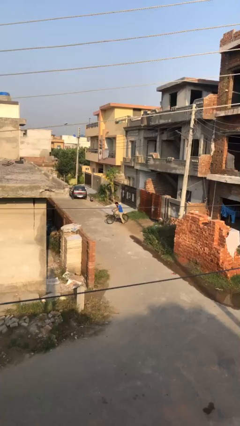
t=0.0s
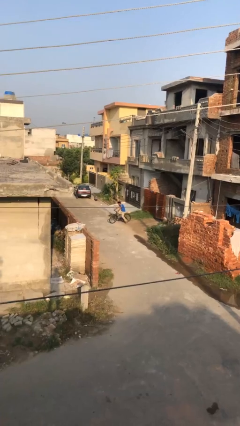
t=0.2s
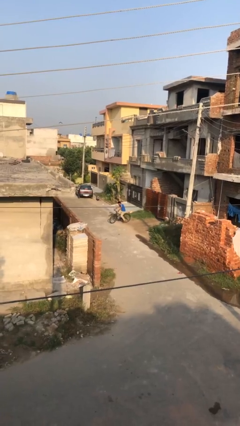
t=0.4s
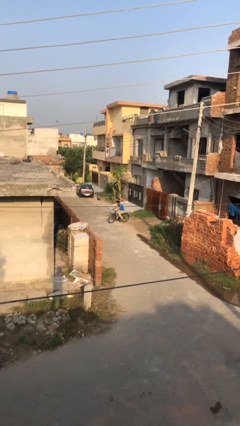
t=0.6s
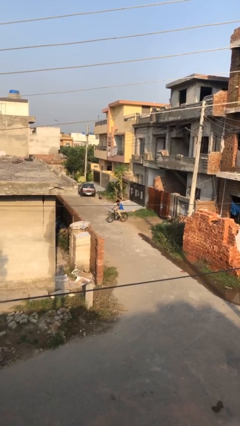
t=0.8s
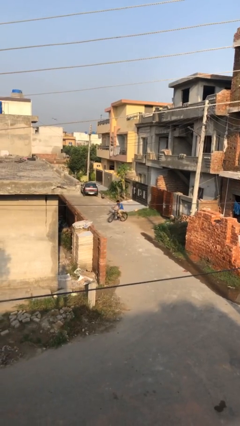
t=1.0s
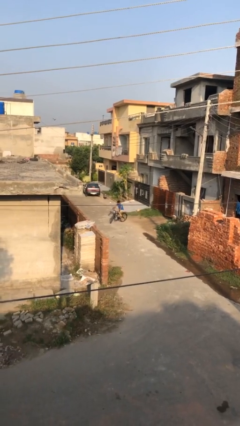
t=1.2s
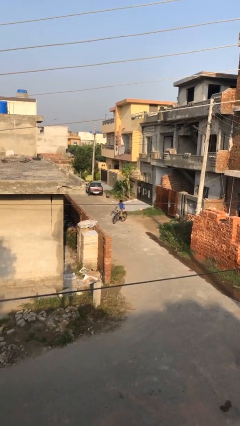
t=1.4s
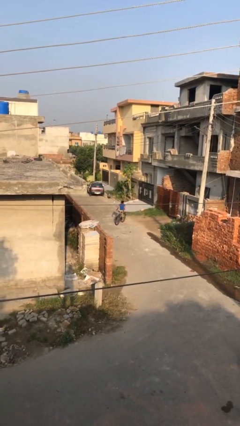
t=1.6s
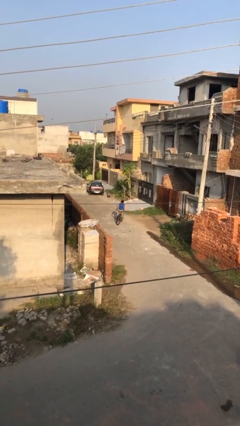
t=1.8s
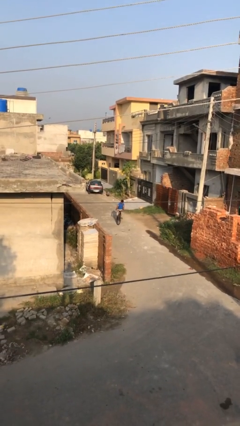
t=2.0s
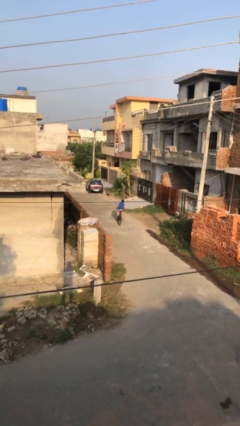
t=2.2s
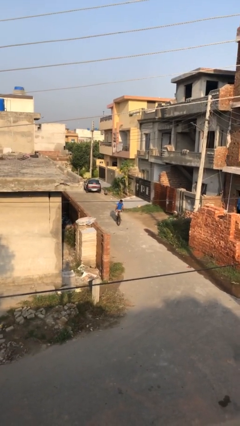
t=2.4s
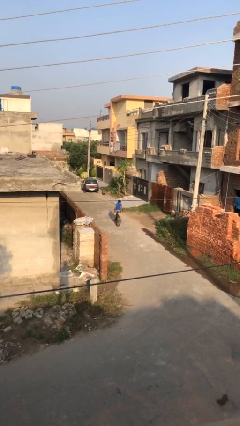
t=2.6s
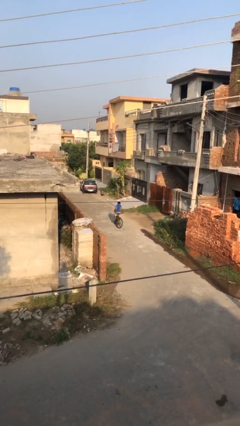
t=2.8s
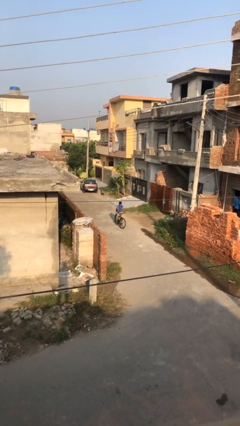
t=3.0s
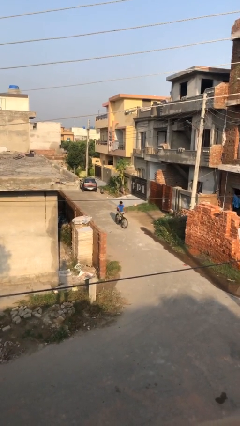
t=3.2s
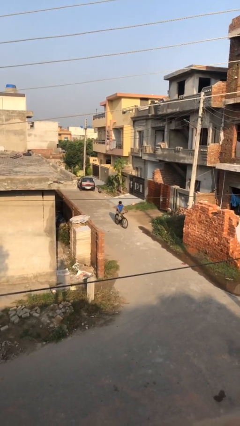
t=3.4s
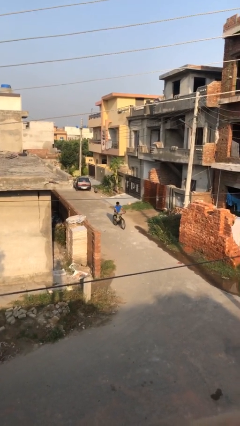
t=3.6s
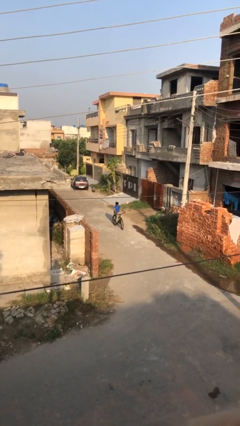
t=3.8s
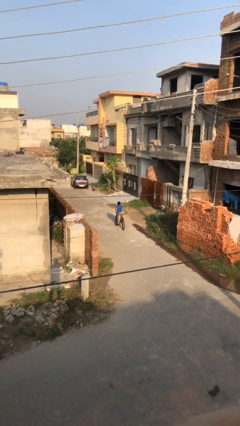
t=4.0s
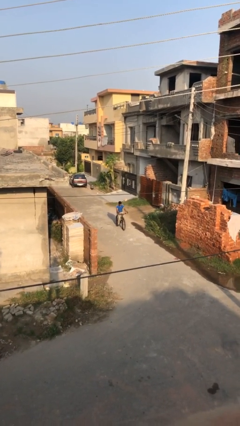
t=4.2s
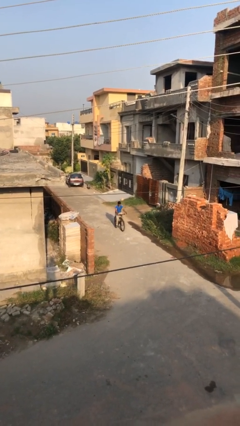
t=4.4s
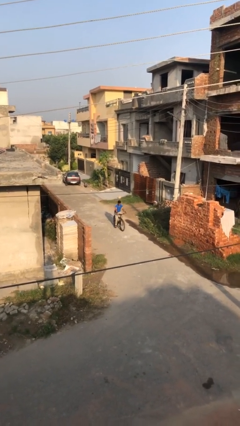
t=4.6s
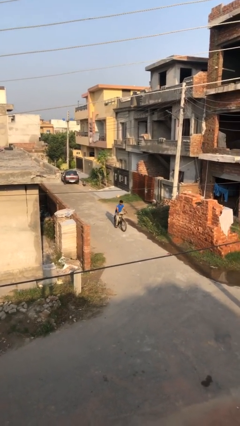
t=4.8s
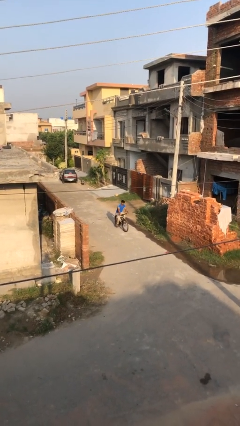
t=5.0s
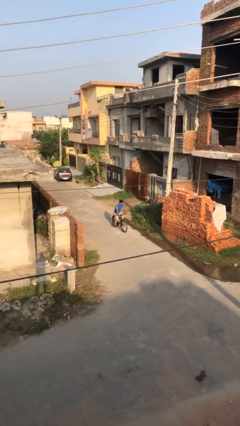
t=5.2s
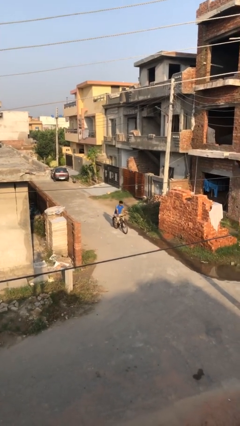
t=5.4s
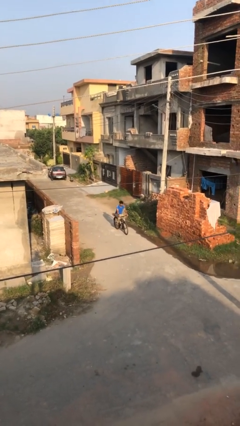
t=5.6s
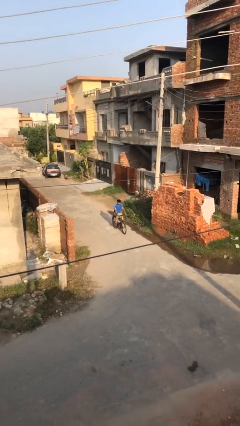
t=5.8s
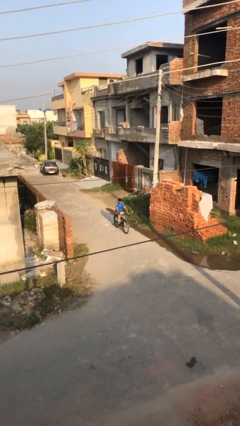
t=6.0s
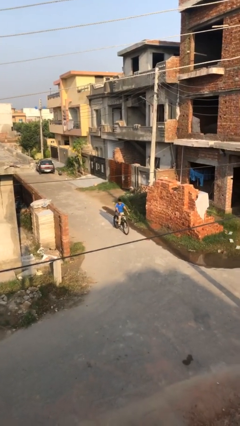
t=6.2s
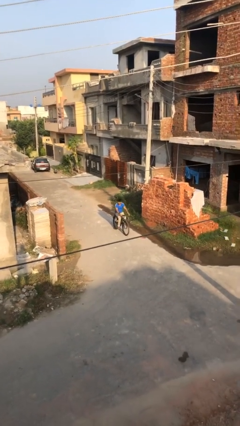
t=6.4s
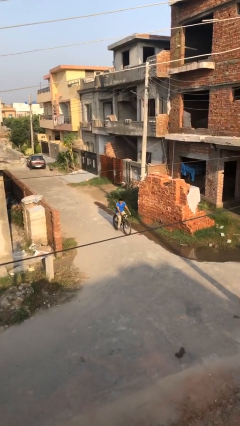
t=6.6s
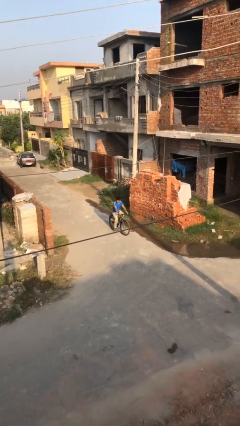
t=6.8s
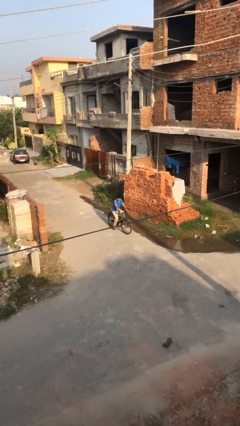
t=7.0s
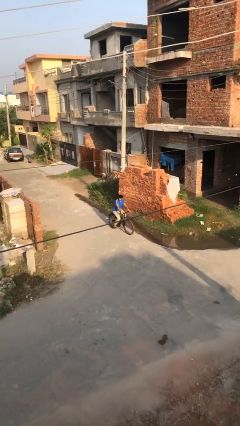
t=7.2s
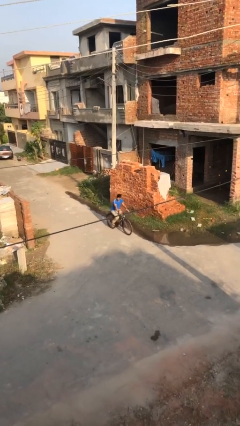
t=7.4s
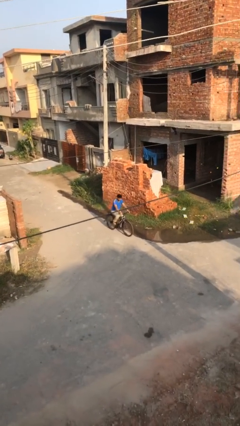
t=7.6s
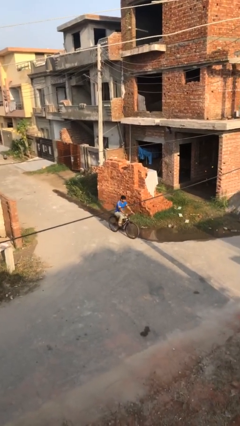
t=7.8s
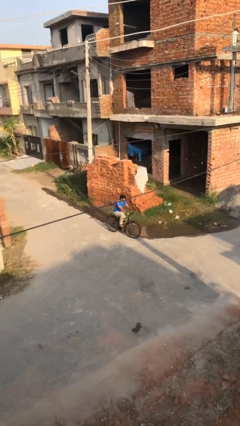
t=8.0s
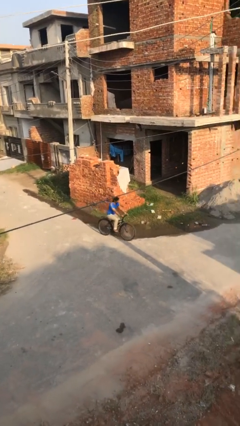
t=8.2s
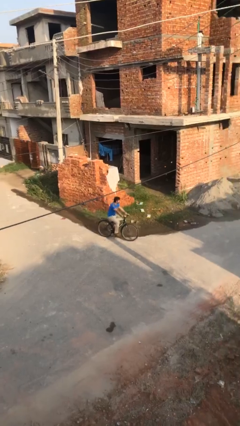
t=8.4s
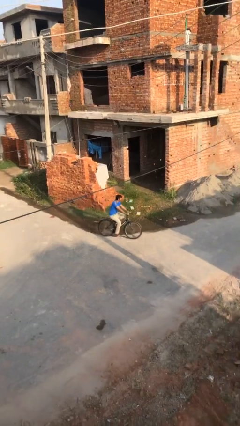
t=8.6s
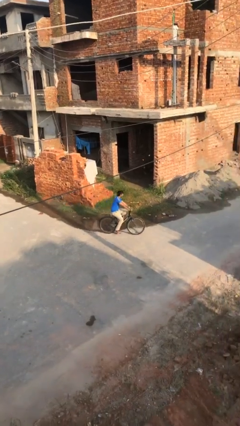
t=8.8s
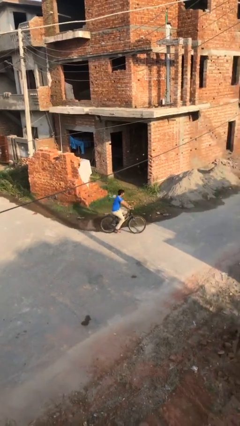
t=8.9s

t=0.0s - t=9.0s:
person rides bicycle

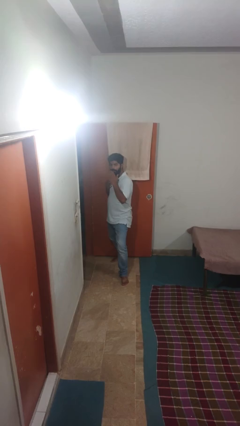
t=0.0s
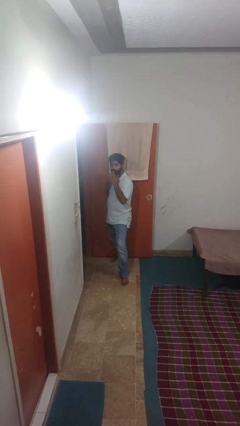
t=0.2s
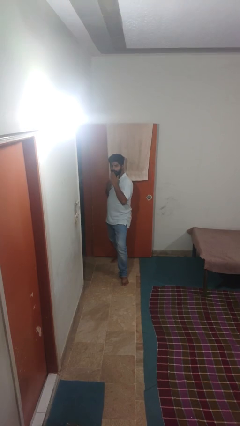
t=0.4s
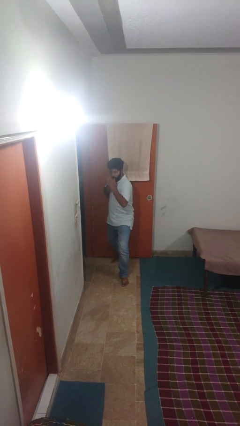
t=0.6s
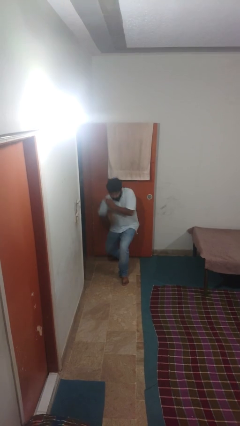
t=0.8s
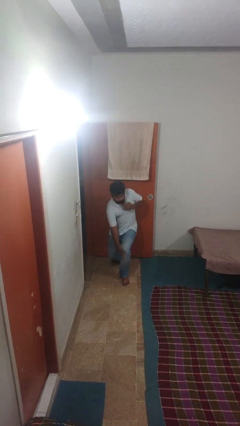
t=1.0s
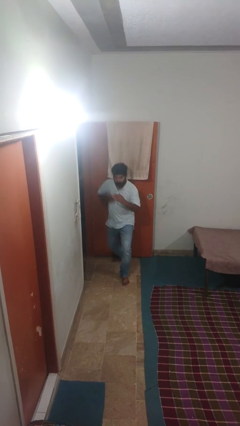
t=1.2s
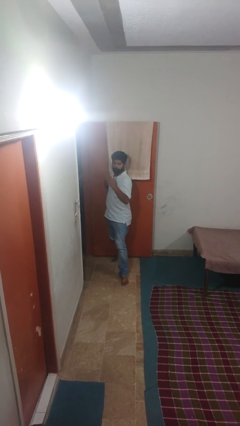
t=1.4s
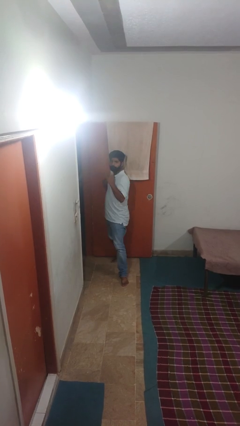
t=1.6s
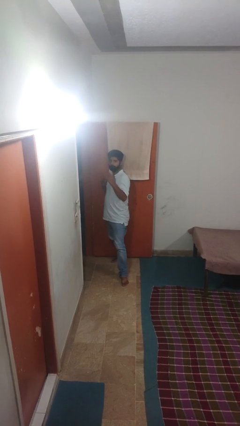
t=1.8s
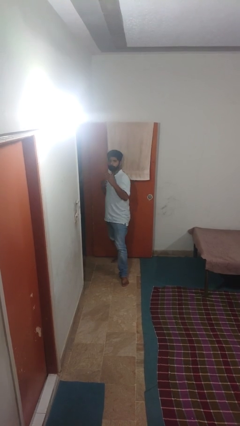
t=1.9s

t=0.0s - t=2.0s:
person karate chop

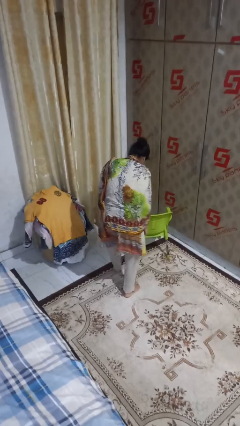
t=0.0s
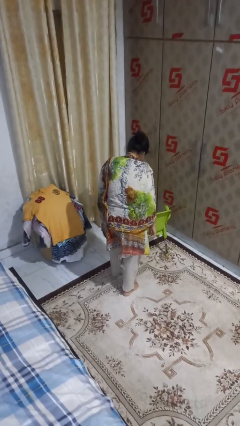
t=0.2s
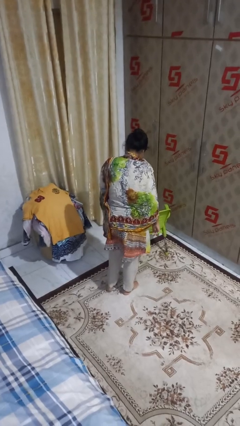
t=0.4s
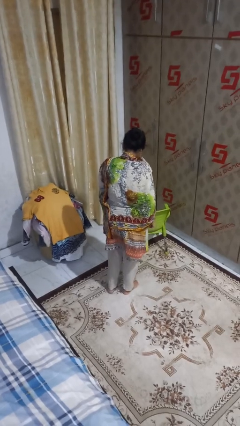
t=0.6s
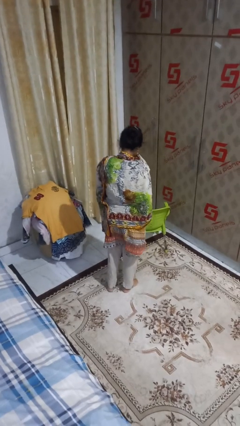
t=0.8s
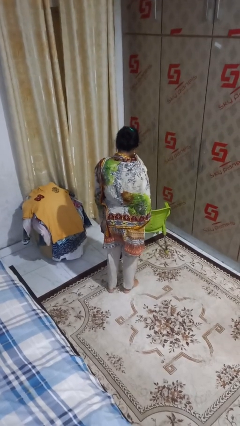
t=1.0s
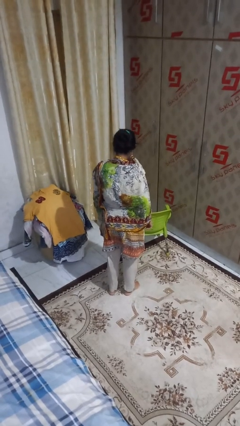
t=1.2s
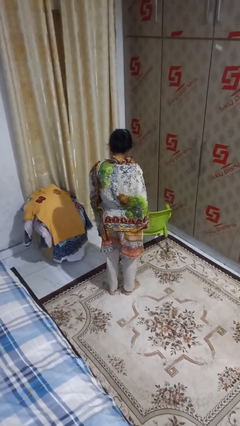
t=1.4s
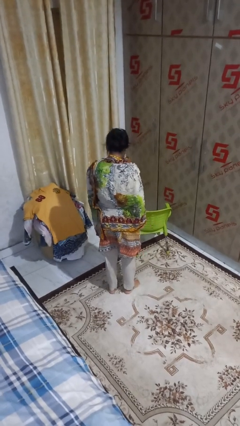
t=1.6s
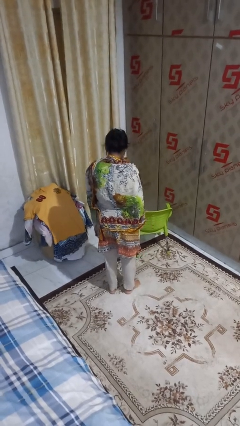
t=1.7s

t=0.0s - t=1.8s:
person stubs toe

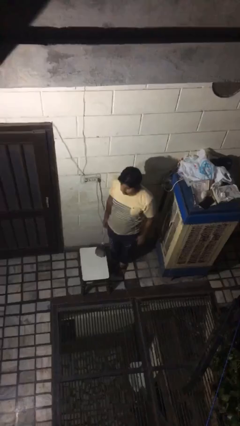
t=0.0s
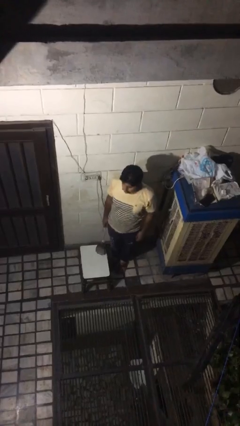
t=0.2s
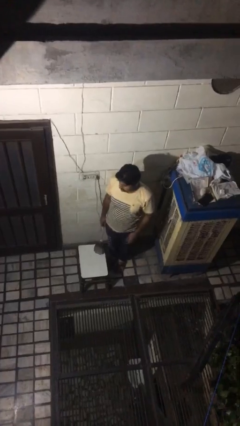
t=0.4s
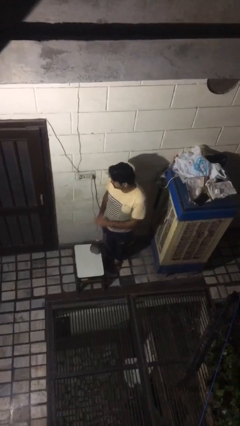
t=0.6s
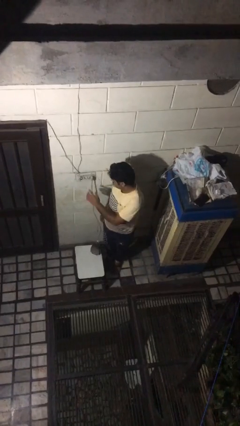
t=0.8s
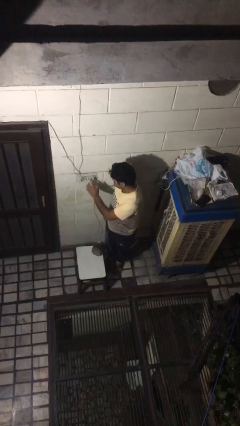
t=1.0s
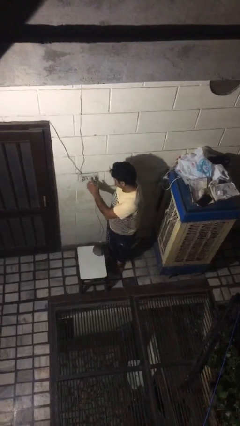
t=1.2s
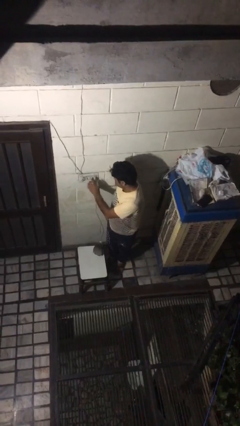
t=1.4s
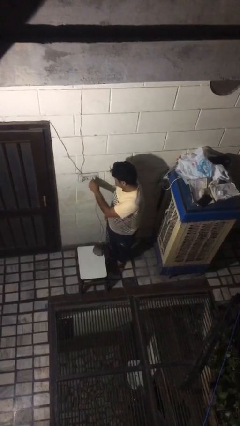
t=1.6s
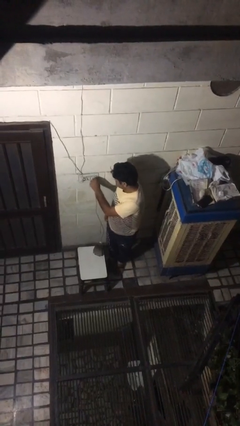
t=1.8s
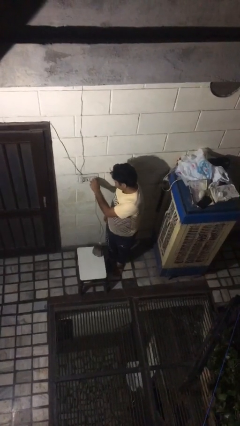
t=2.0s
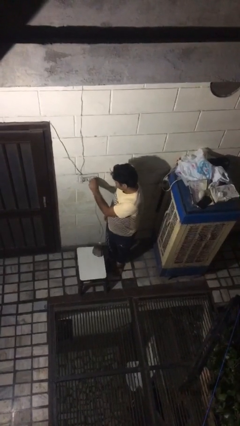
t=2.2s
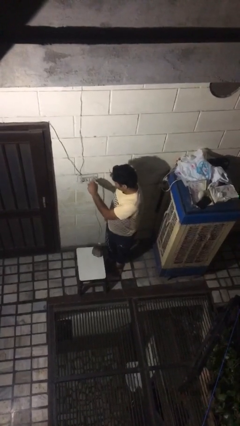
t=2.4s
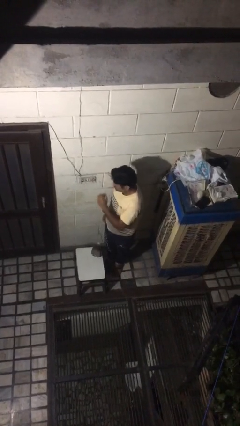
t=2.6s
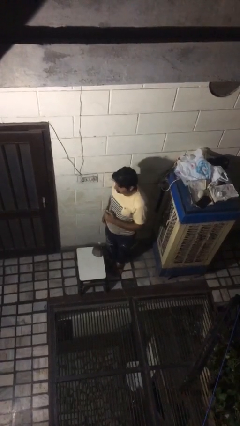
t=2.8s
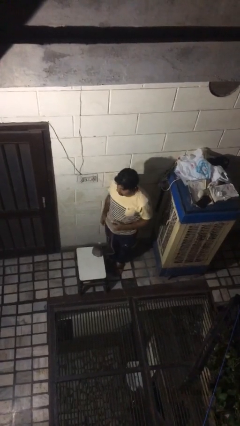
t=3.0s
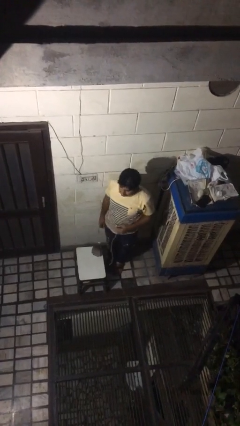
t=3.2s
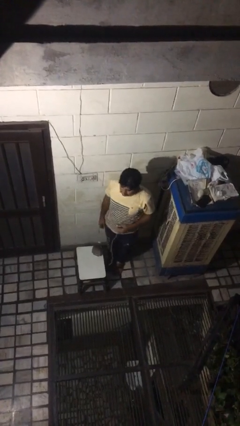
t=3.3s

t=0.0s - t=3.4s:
person unplugs from electrical socket

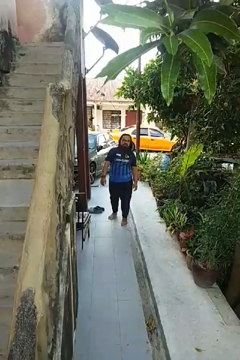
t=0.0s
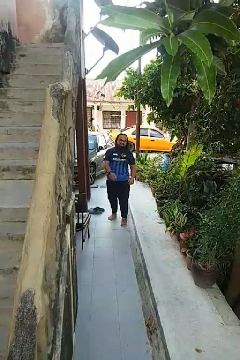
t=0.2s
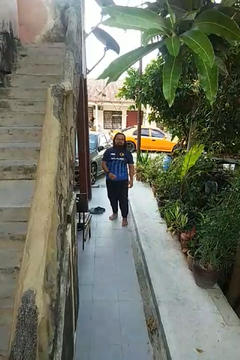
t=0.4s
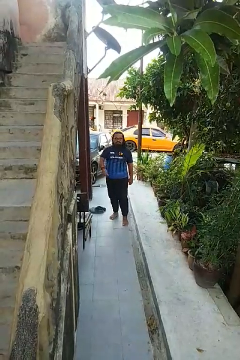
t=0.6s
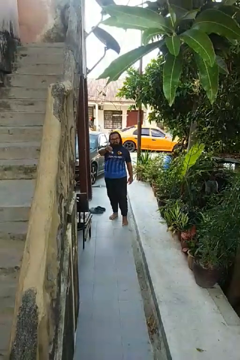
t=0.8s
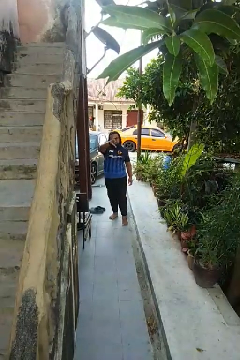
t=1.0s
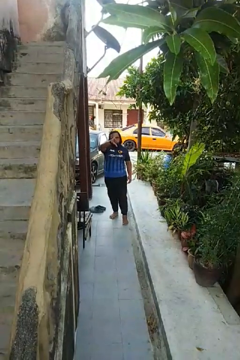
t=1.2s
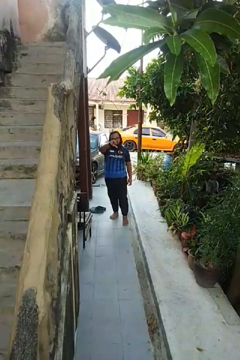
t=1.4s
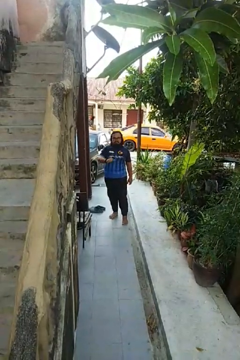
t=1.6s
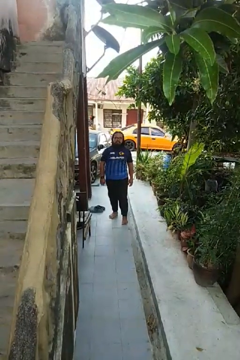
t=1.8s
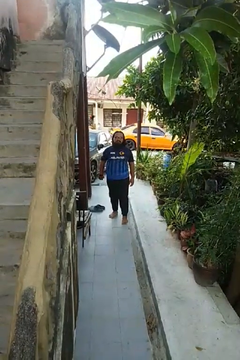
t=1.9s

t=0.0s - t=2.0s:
person gestures thumbs down
